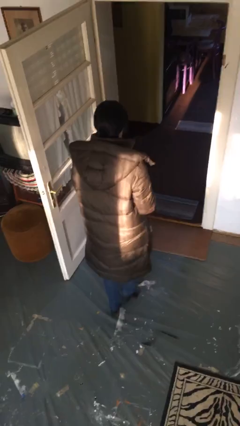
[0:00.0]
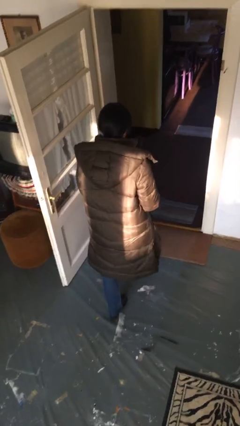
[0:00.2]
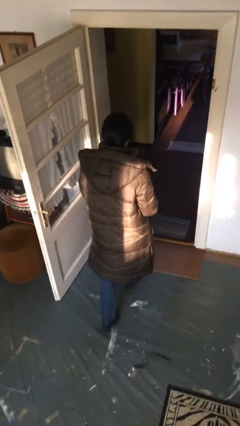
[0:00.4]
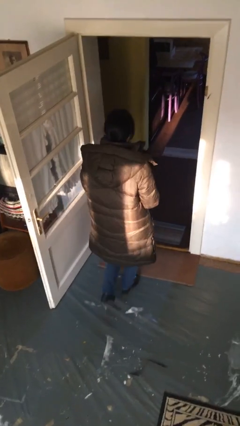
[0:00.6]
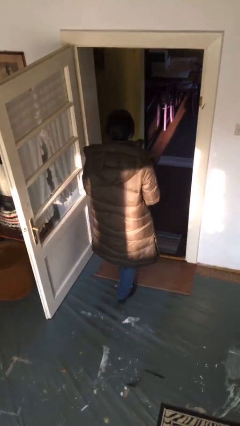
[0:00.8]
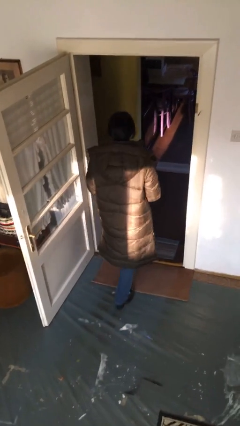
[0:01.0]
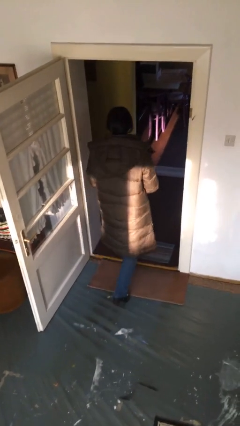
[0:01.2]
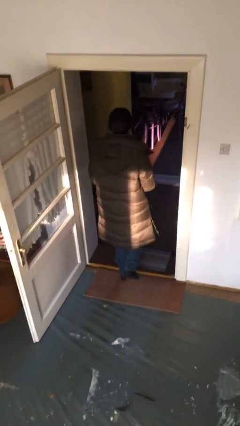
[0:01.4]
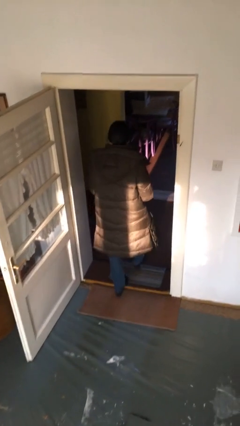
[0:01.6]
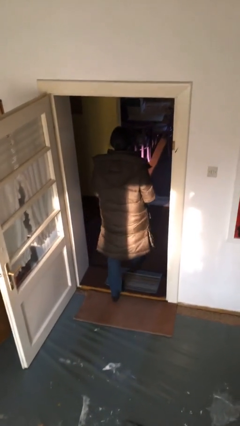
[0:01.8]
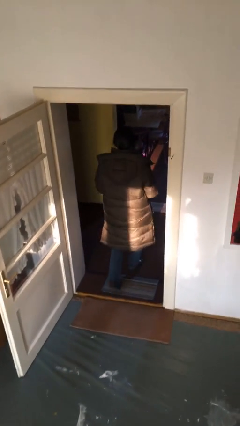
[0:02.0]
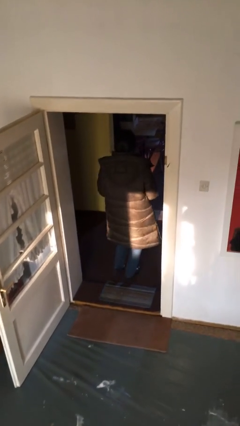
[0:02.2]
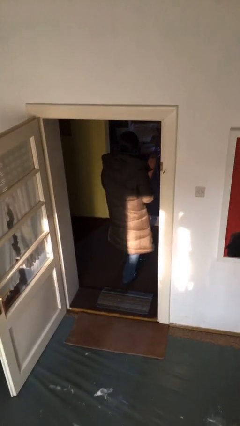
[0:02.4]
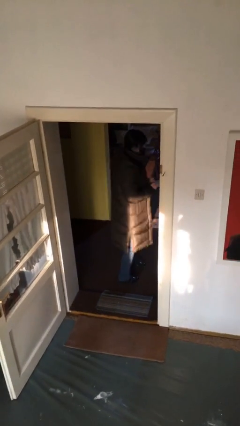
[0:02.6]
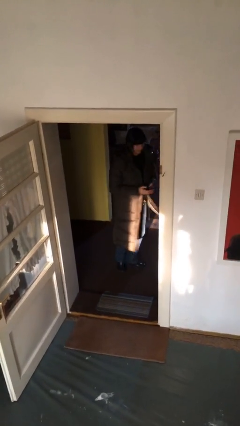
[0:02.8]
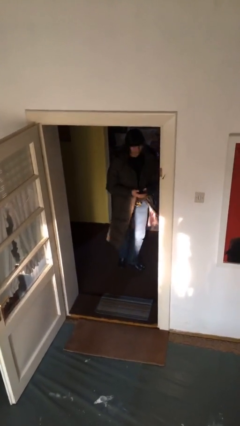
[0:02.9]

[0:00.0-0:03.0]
person exits scene through structure

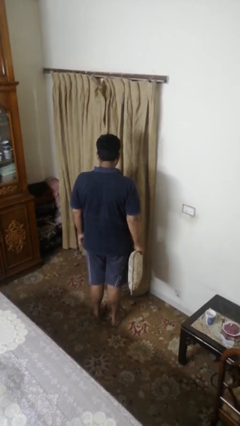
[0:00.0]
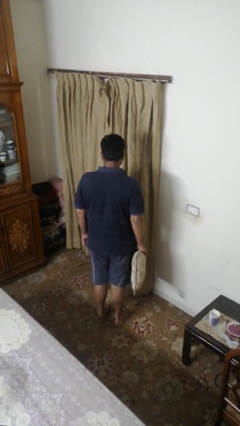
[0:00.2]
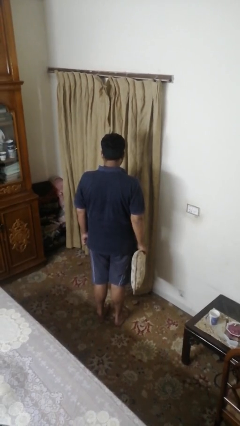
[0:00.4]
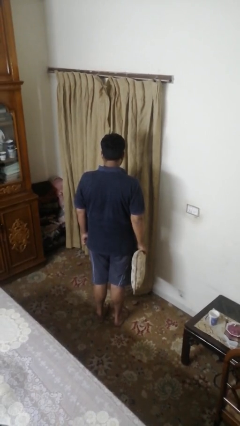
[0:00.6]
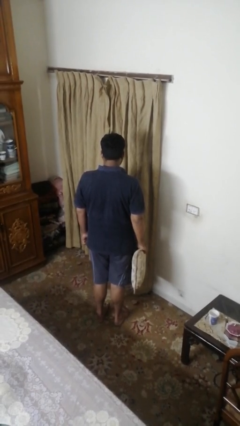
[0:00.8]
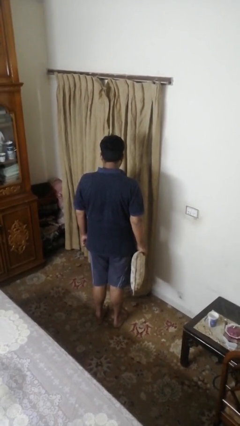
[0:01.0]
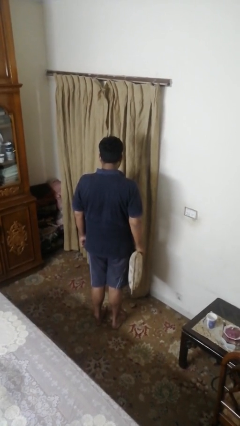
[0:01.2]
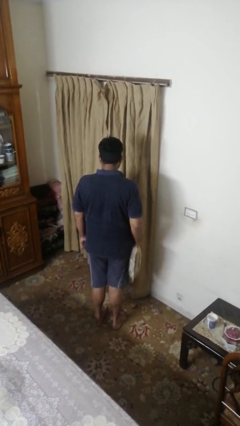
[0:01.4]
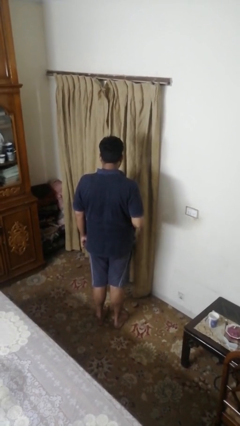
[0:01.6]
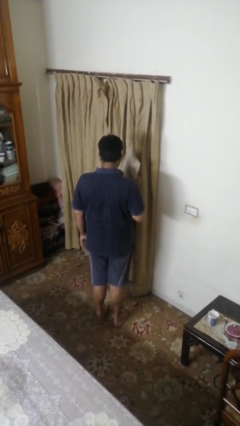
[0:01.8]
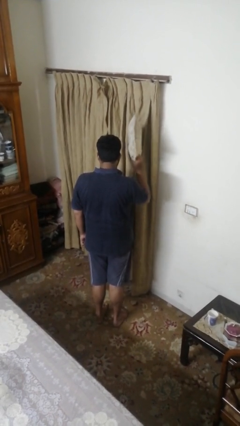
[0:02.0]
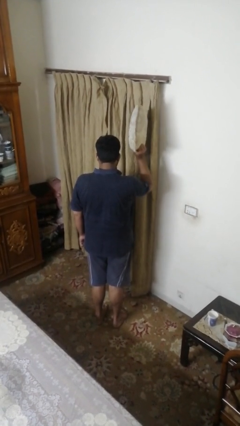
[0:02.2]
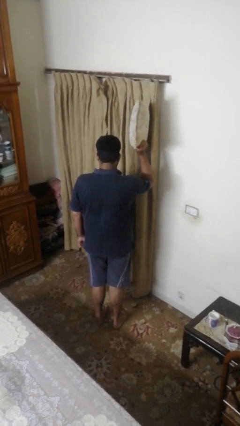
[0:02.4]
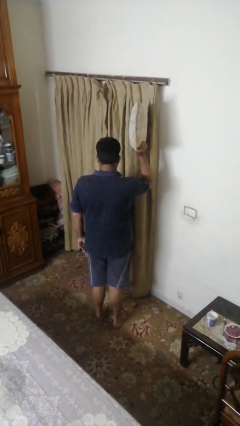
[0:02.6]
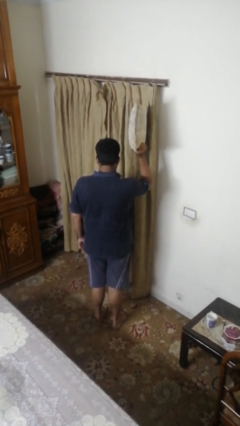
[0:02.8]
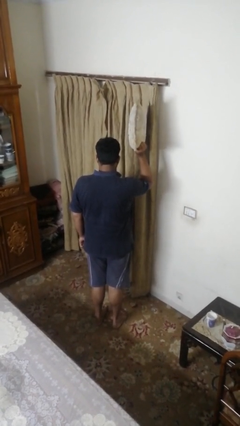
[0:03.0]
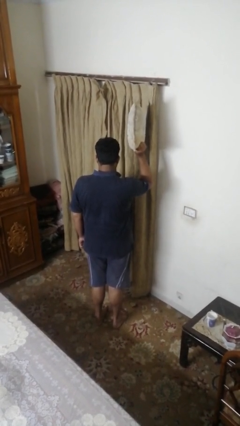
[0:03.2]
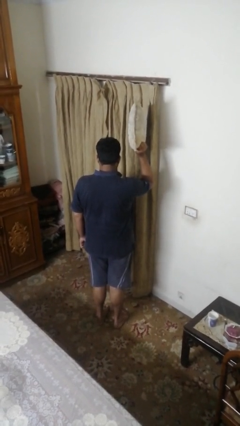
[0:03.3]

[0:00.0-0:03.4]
person holds object above head

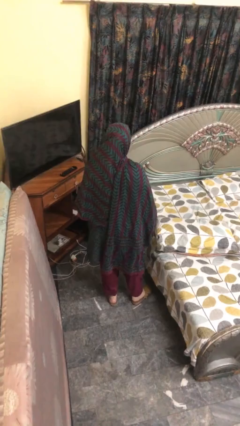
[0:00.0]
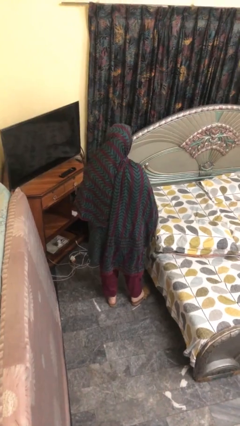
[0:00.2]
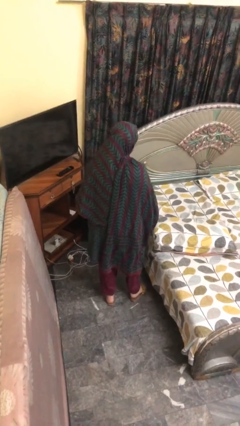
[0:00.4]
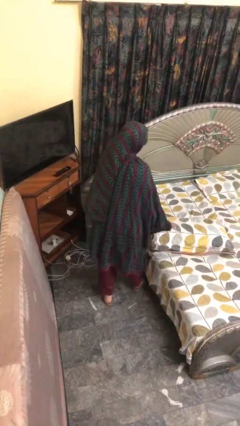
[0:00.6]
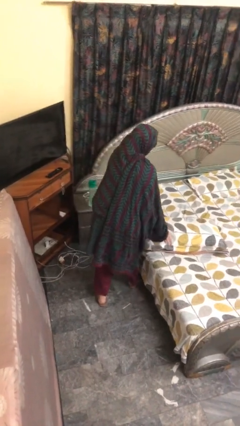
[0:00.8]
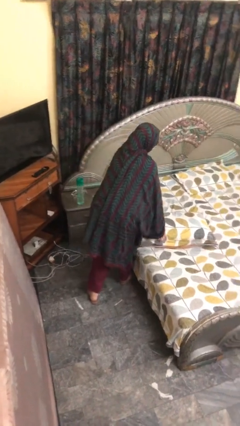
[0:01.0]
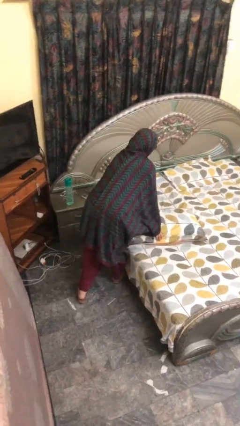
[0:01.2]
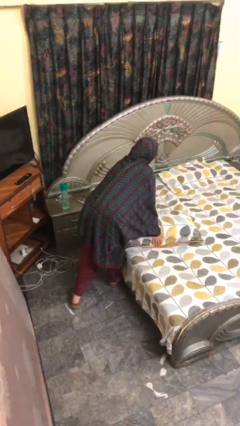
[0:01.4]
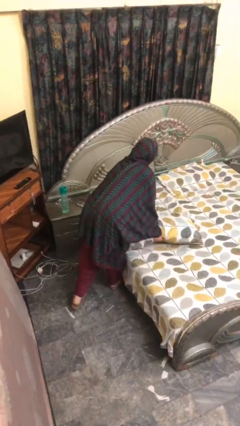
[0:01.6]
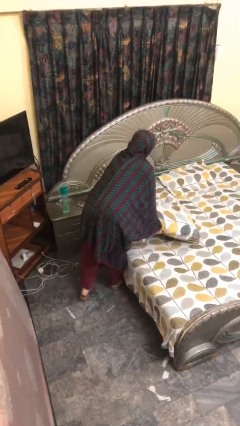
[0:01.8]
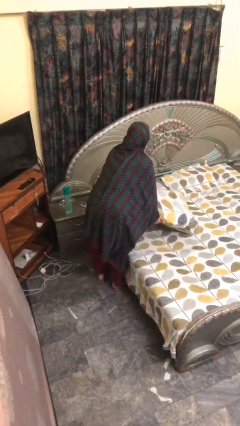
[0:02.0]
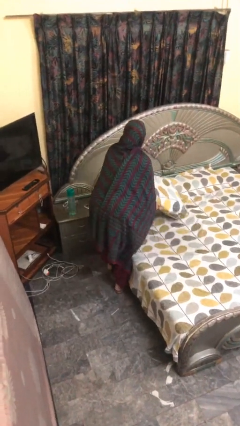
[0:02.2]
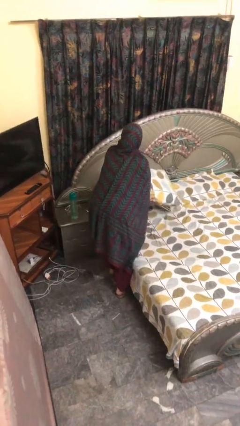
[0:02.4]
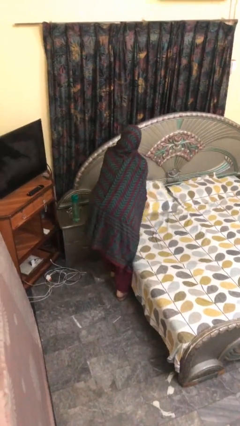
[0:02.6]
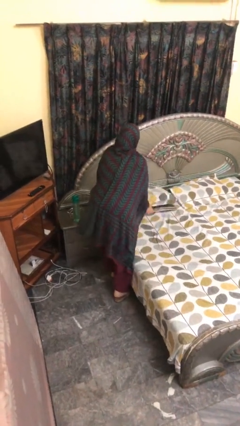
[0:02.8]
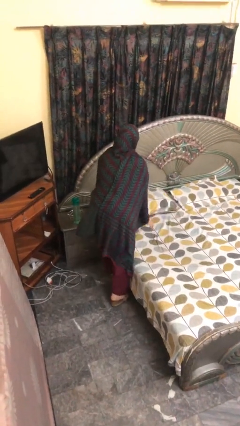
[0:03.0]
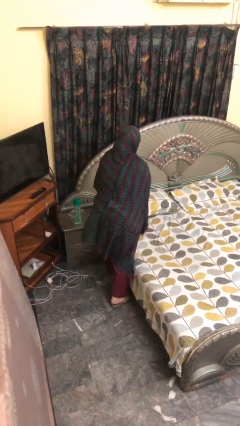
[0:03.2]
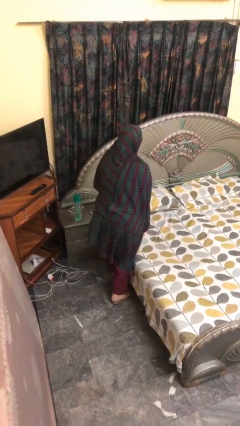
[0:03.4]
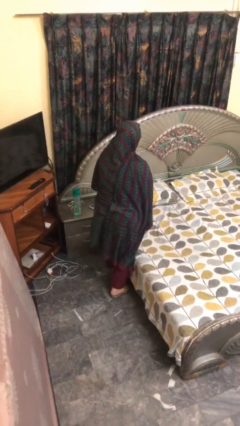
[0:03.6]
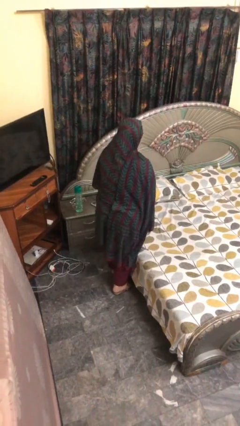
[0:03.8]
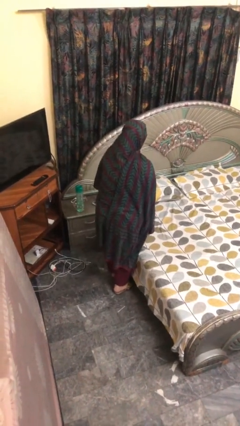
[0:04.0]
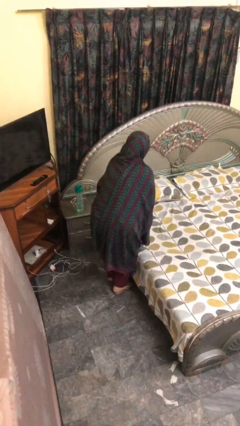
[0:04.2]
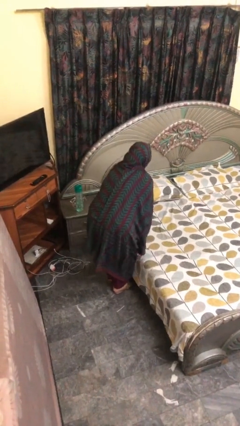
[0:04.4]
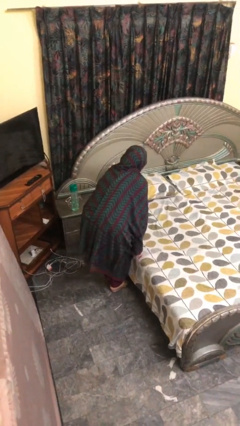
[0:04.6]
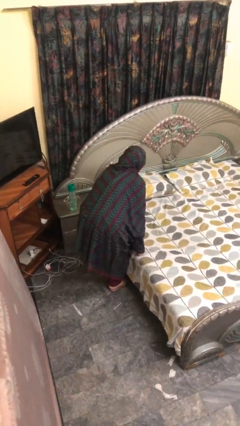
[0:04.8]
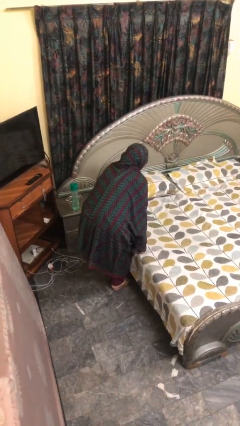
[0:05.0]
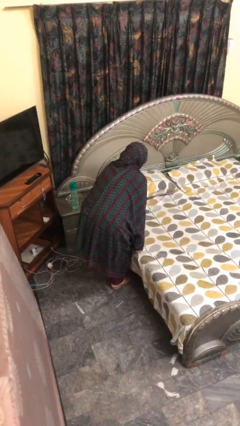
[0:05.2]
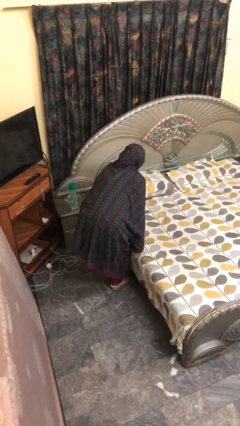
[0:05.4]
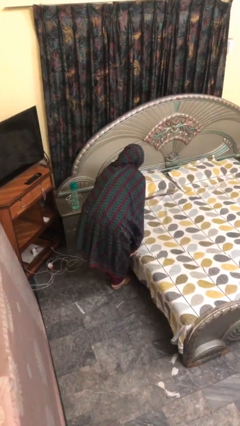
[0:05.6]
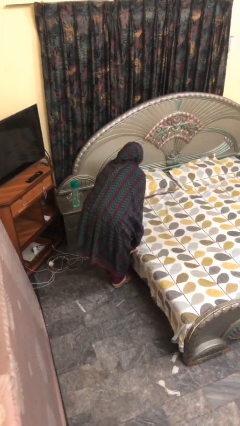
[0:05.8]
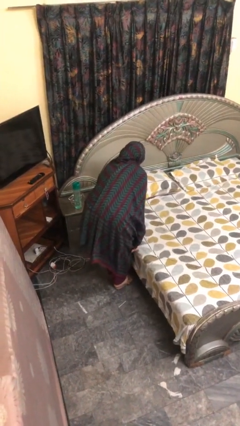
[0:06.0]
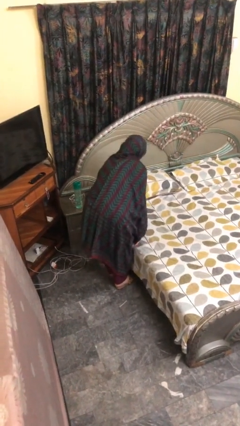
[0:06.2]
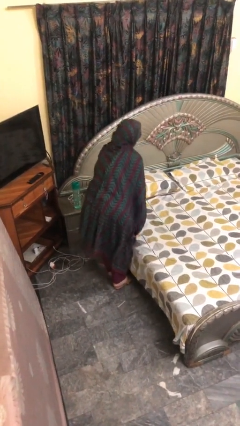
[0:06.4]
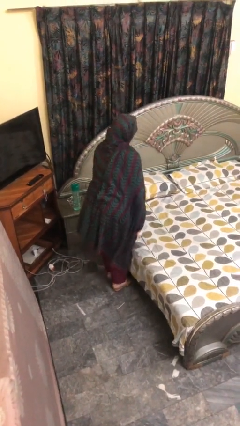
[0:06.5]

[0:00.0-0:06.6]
person makes bed

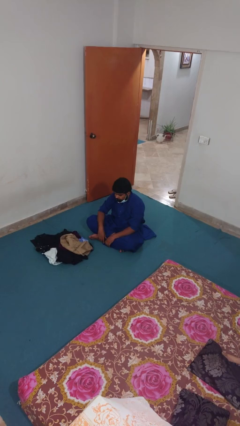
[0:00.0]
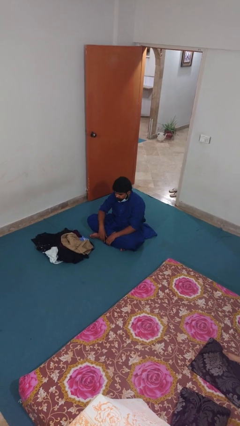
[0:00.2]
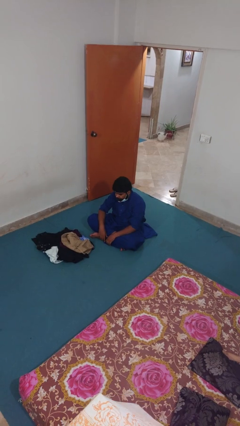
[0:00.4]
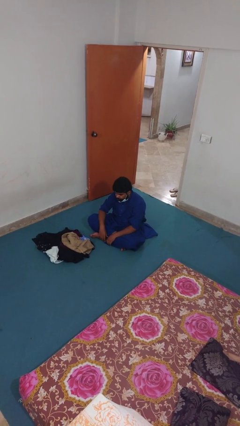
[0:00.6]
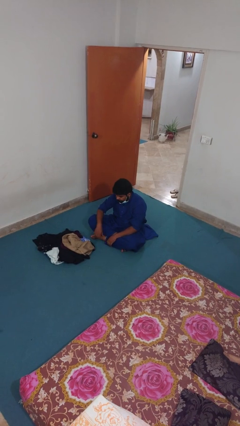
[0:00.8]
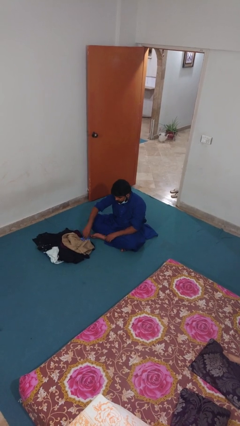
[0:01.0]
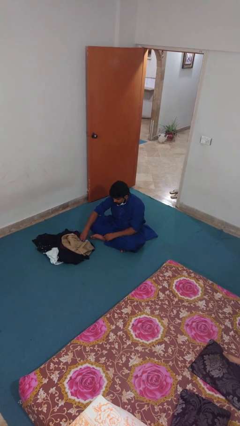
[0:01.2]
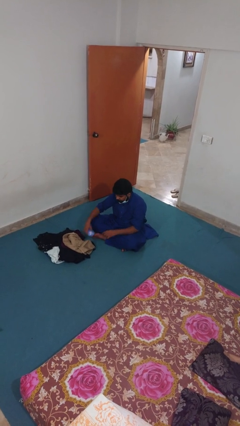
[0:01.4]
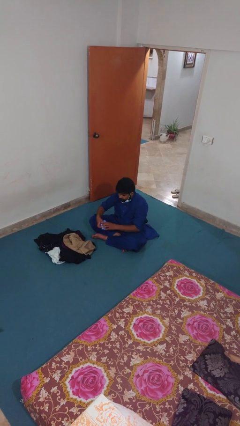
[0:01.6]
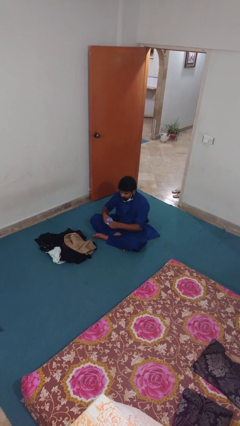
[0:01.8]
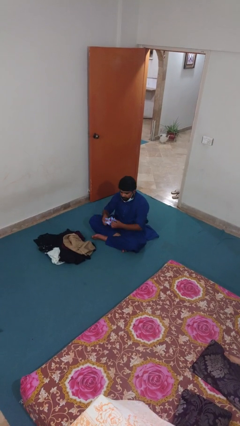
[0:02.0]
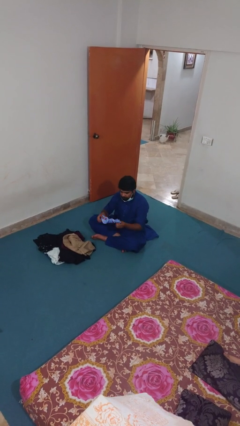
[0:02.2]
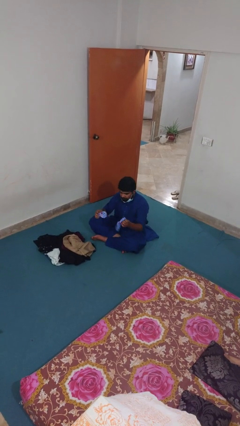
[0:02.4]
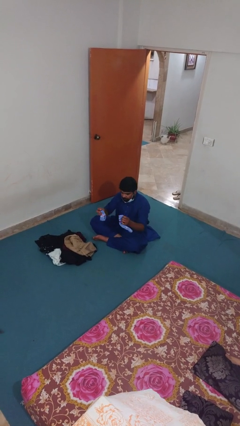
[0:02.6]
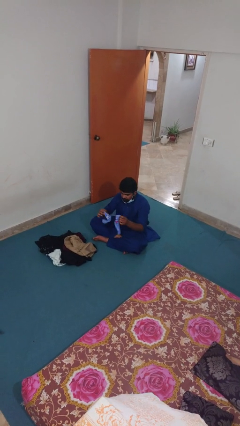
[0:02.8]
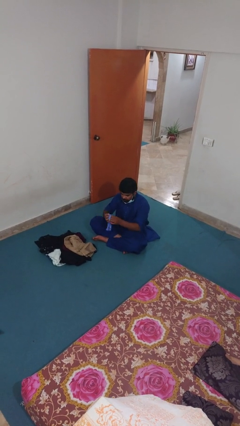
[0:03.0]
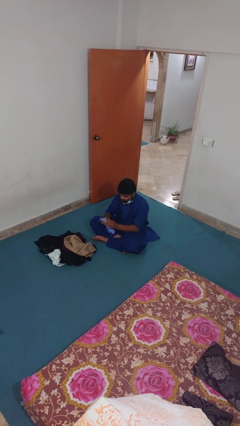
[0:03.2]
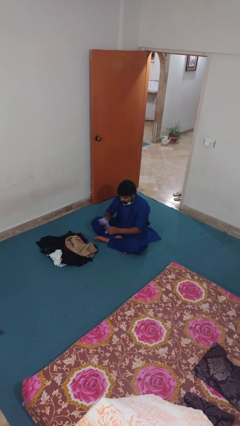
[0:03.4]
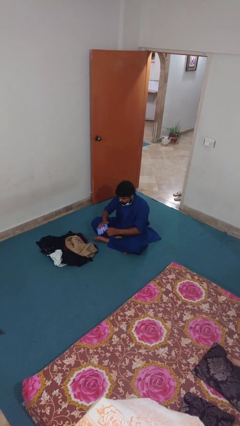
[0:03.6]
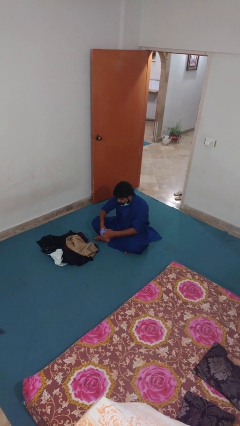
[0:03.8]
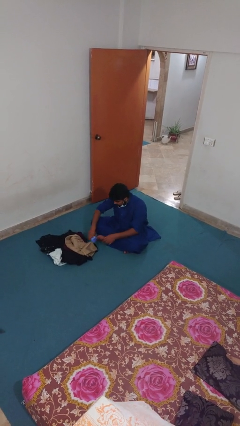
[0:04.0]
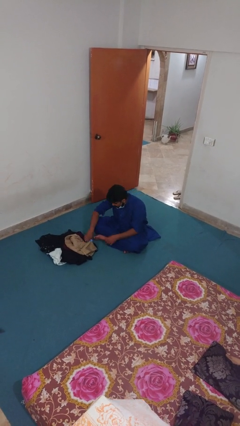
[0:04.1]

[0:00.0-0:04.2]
person folds socks

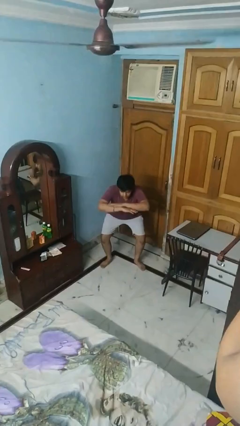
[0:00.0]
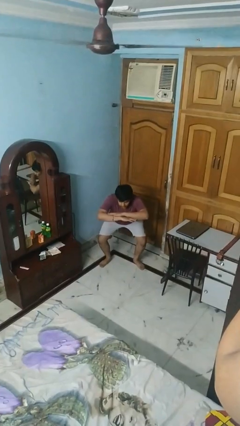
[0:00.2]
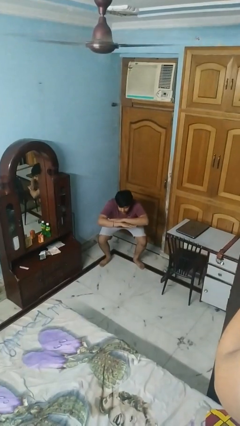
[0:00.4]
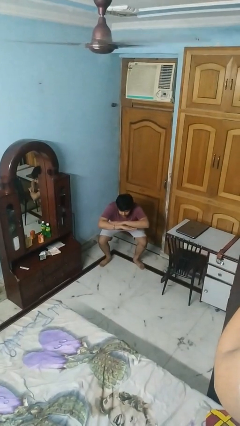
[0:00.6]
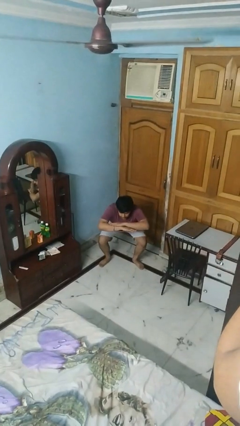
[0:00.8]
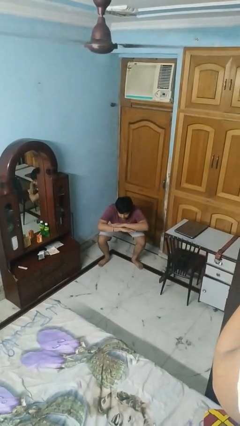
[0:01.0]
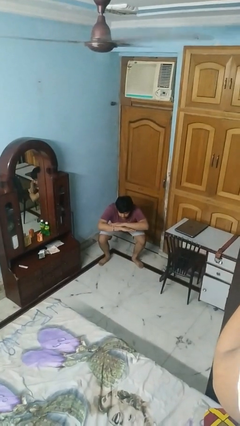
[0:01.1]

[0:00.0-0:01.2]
person squats
